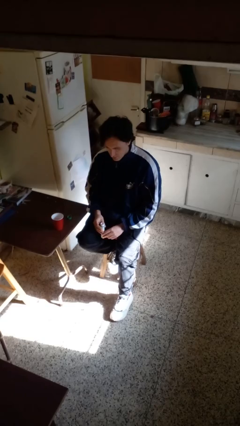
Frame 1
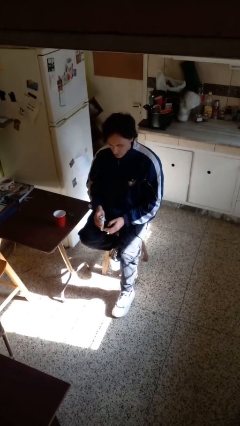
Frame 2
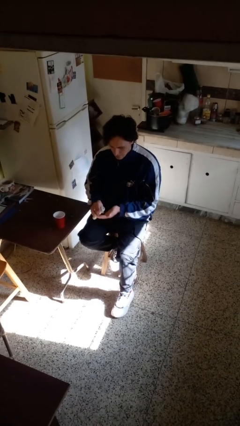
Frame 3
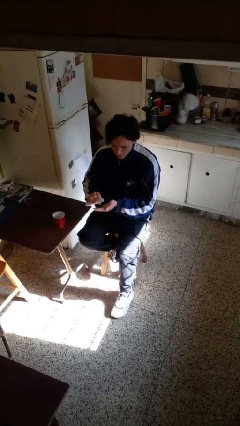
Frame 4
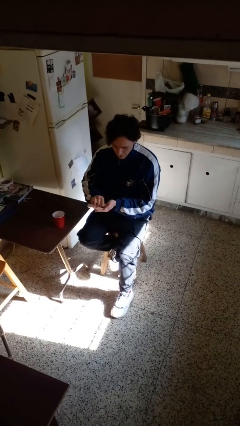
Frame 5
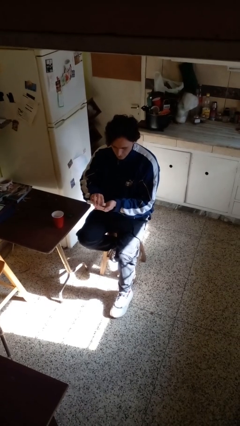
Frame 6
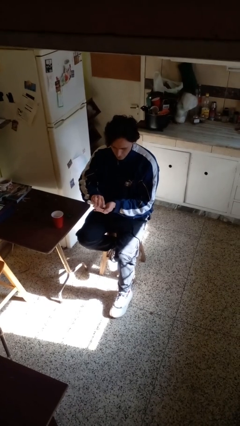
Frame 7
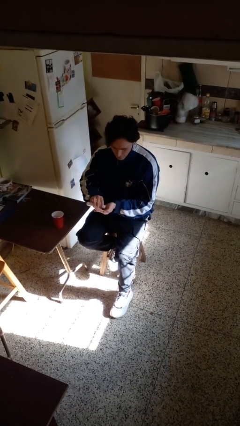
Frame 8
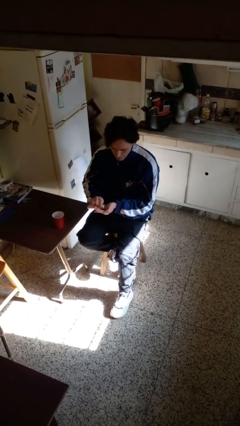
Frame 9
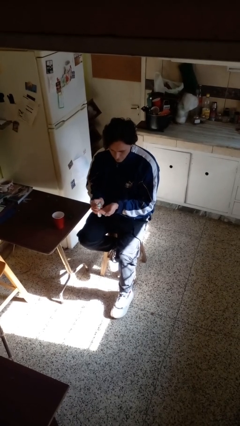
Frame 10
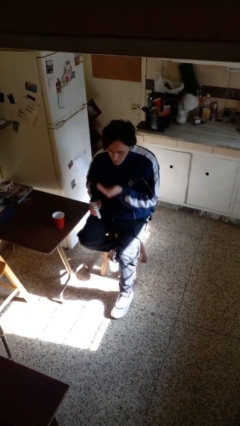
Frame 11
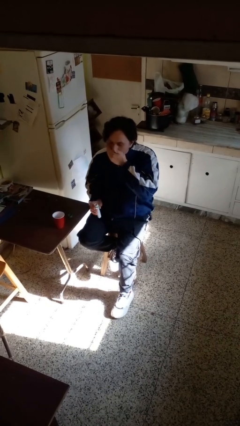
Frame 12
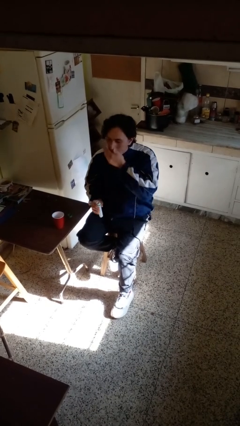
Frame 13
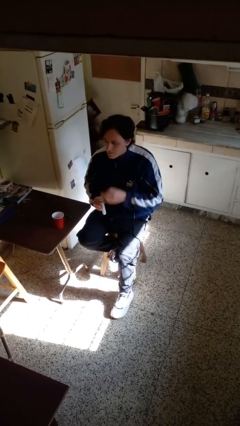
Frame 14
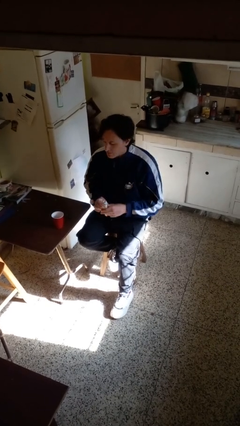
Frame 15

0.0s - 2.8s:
person takes medicine pills

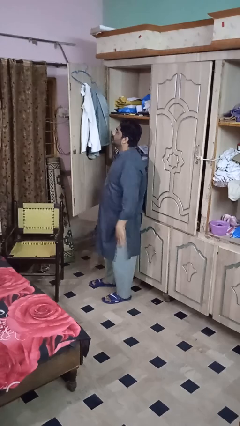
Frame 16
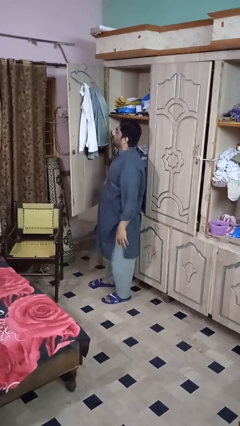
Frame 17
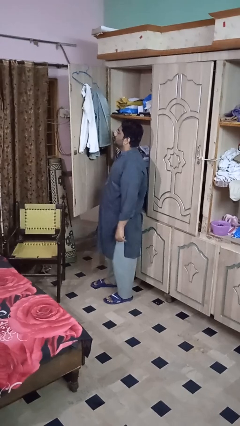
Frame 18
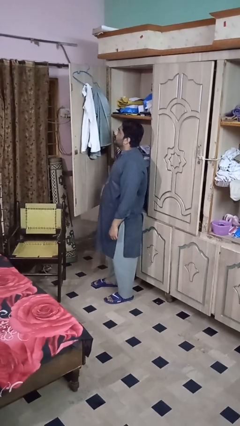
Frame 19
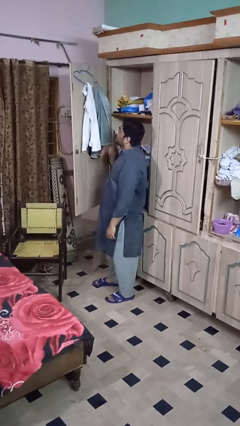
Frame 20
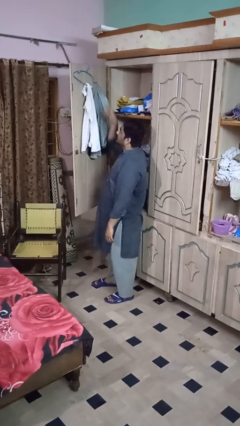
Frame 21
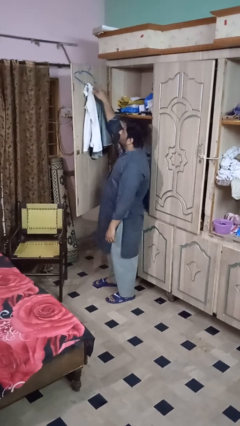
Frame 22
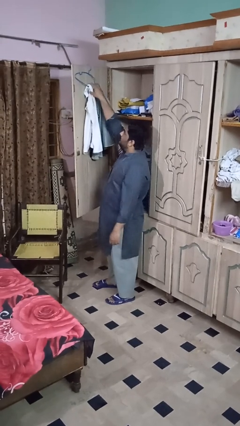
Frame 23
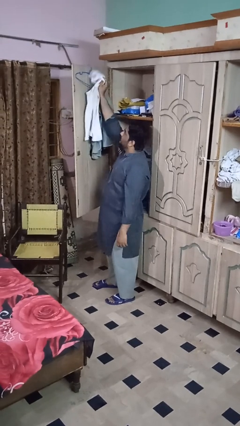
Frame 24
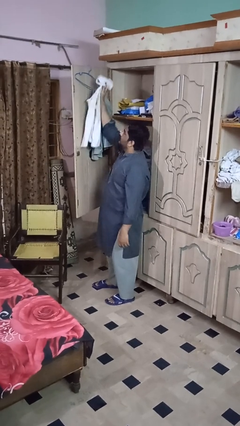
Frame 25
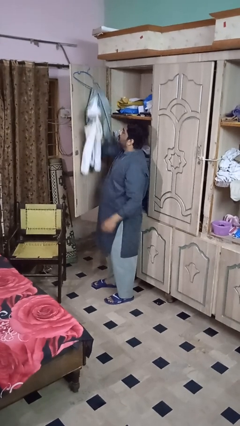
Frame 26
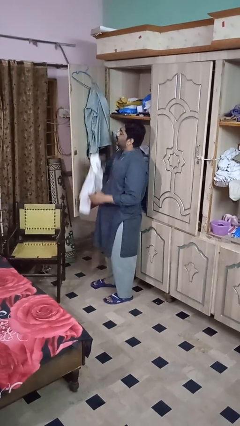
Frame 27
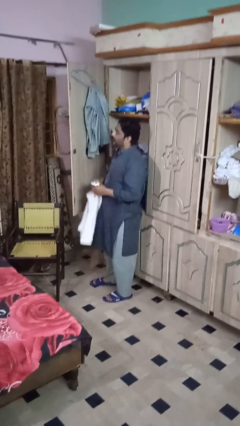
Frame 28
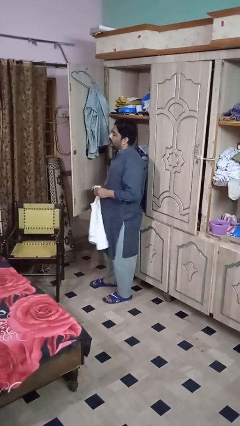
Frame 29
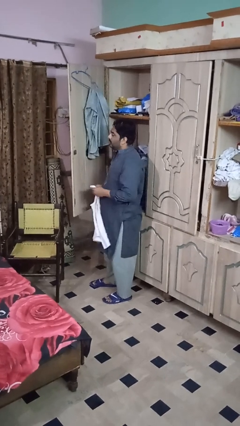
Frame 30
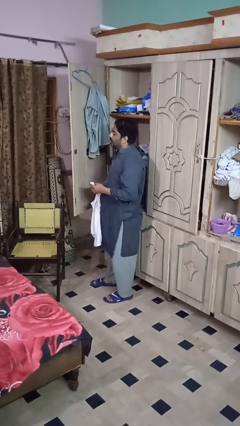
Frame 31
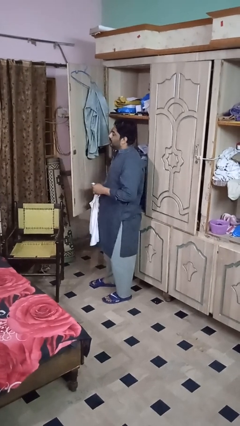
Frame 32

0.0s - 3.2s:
person takes clothes from closet

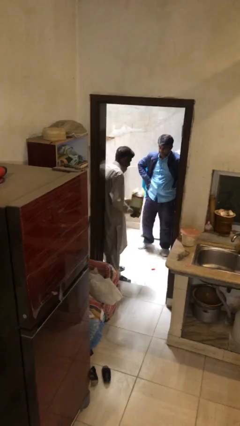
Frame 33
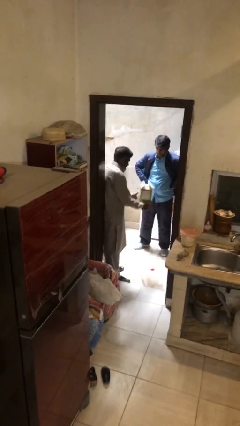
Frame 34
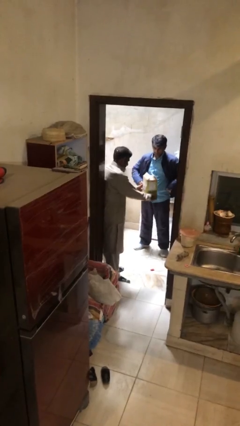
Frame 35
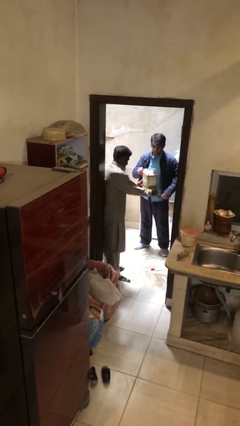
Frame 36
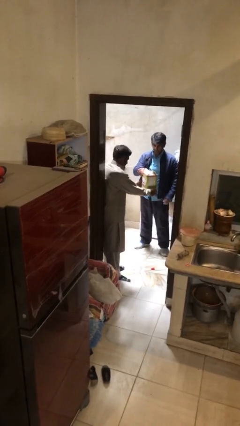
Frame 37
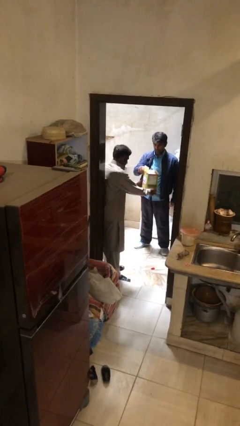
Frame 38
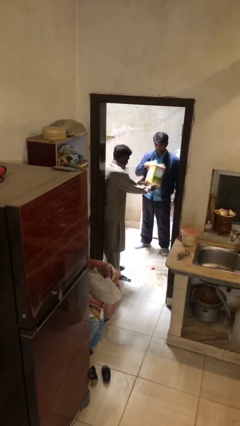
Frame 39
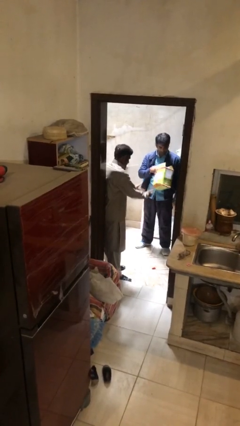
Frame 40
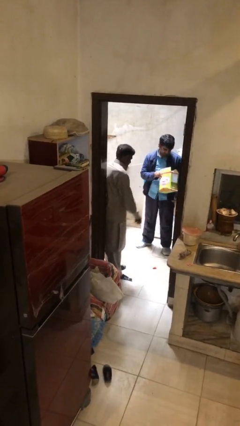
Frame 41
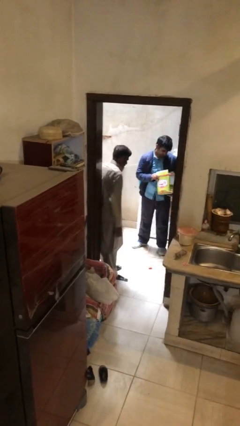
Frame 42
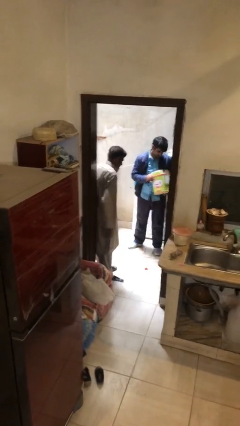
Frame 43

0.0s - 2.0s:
person transfers object to person

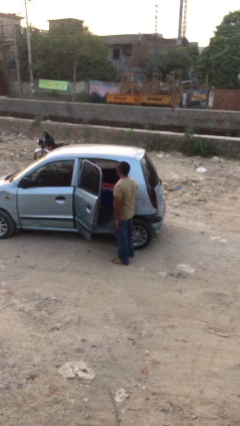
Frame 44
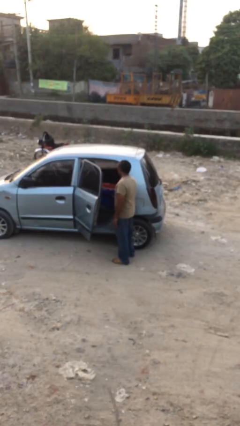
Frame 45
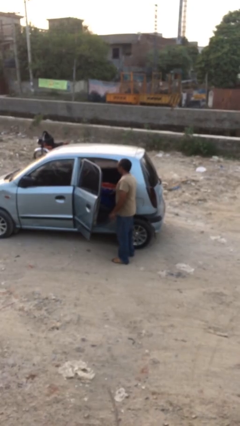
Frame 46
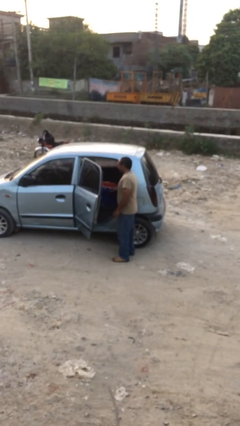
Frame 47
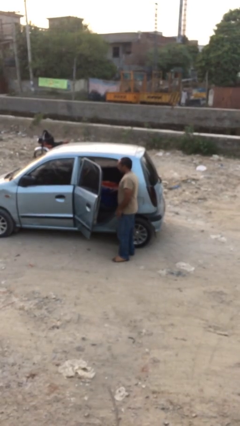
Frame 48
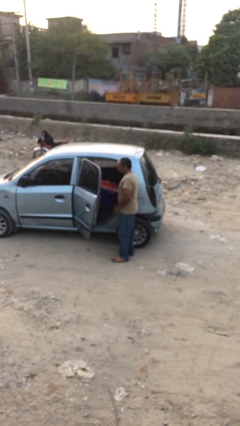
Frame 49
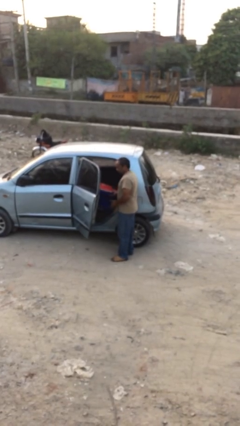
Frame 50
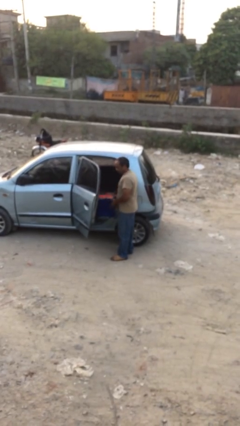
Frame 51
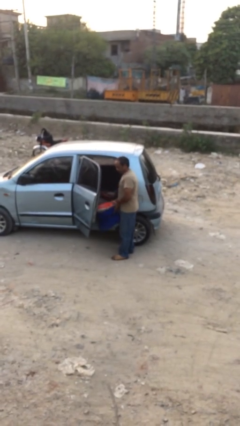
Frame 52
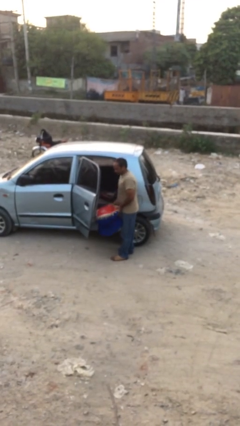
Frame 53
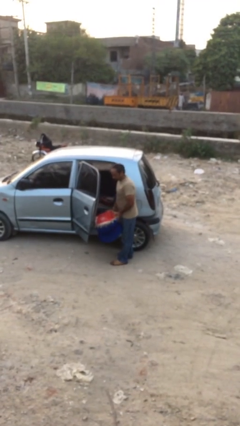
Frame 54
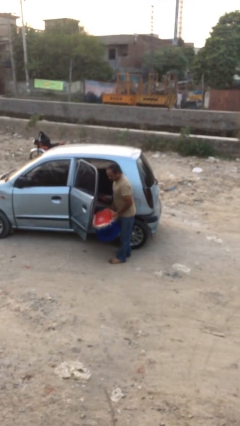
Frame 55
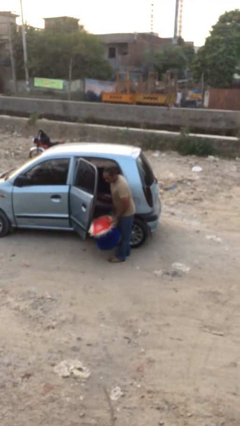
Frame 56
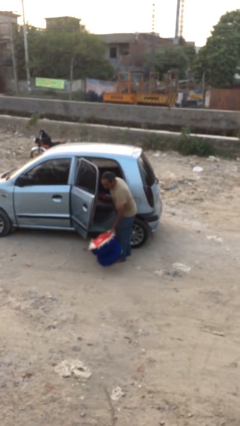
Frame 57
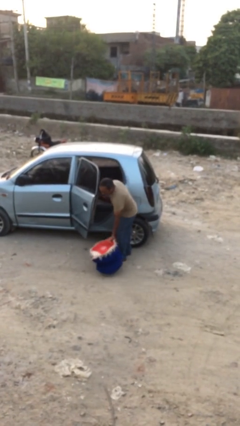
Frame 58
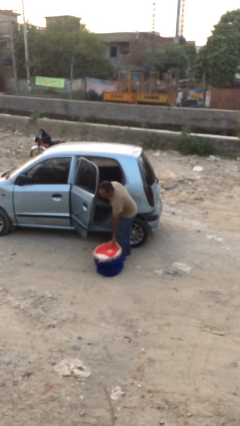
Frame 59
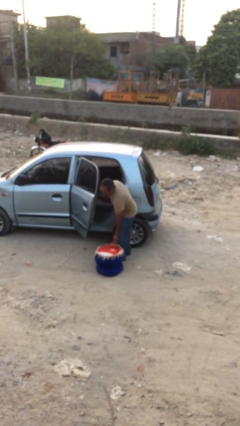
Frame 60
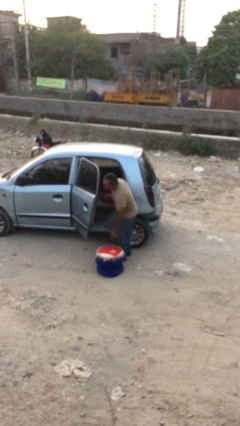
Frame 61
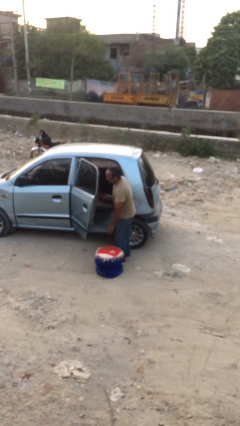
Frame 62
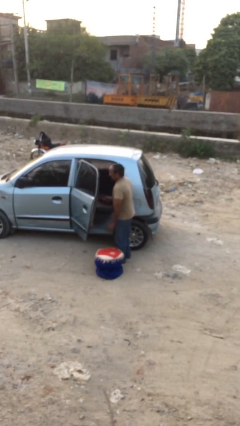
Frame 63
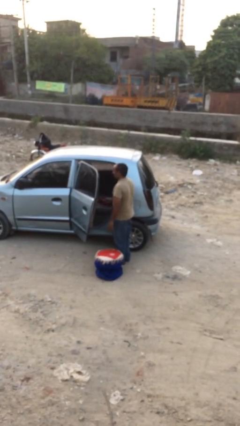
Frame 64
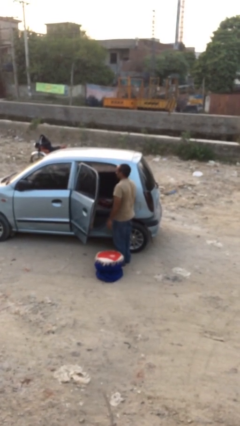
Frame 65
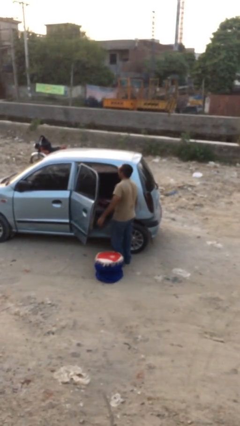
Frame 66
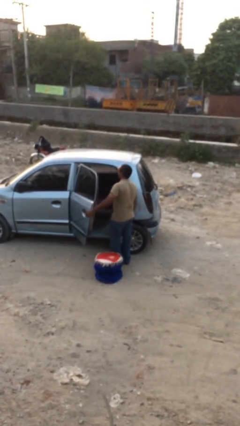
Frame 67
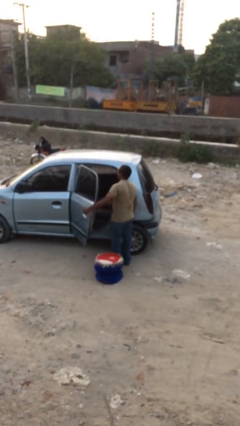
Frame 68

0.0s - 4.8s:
person unloads car

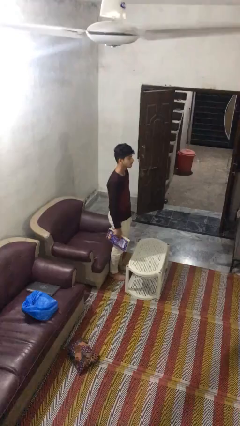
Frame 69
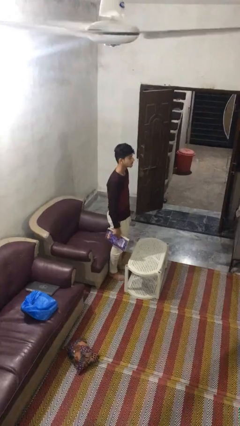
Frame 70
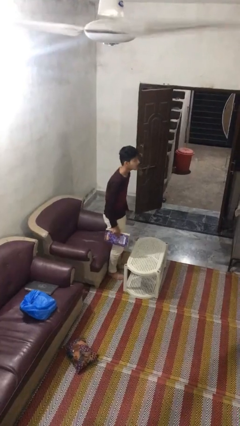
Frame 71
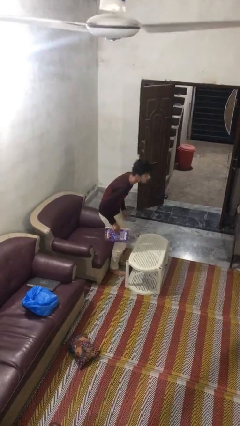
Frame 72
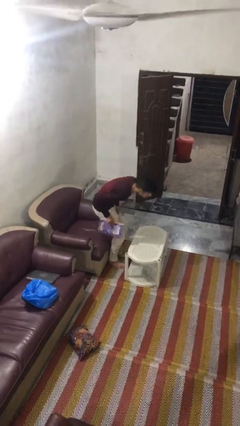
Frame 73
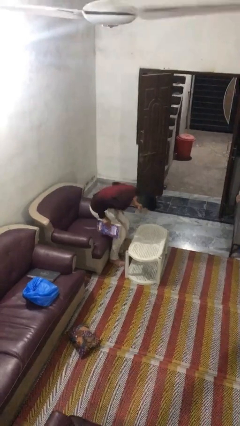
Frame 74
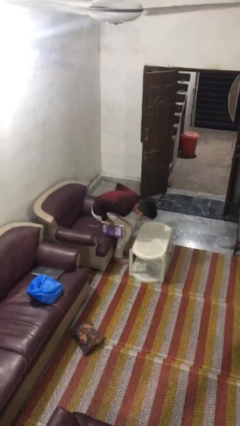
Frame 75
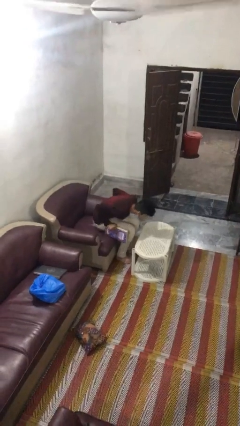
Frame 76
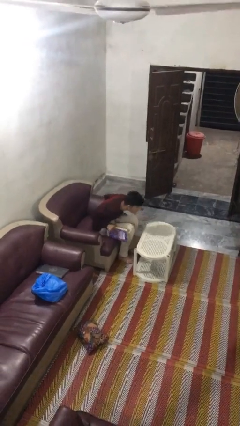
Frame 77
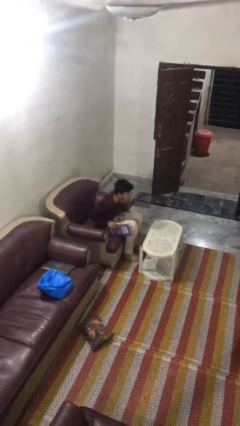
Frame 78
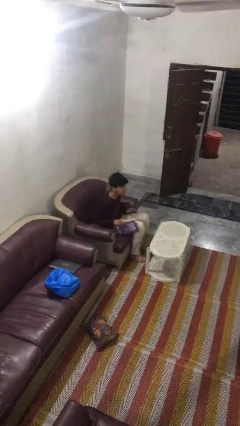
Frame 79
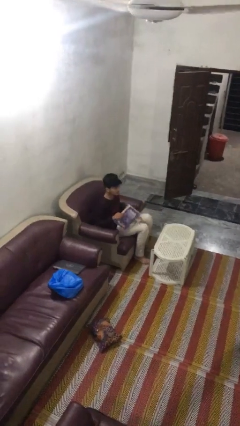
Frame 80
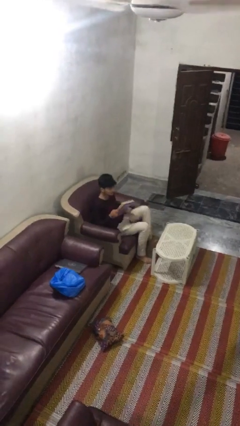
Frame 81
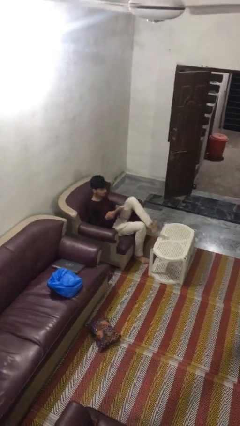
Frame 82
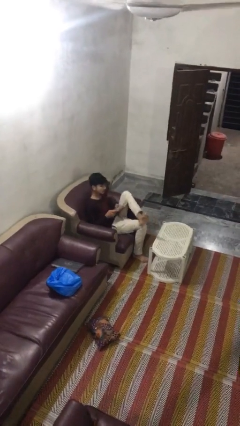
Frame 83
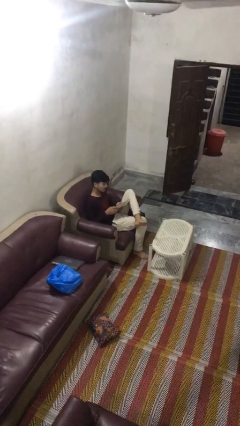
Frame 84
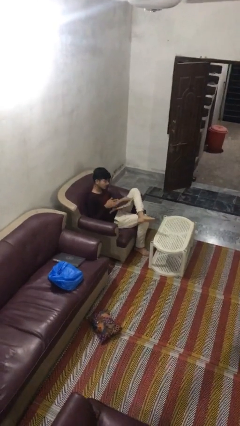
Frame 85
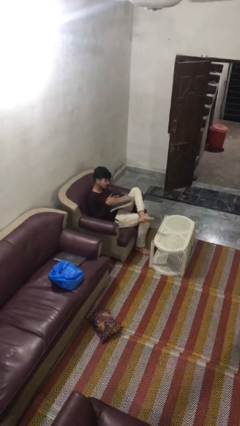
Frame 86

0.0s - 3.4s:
person sits down

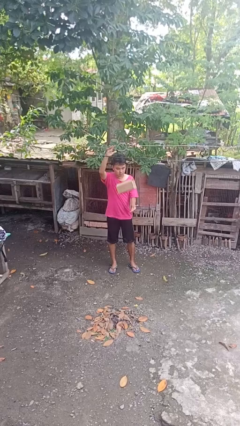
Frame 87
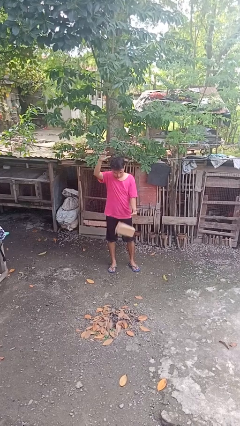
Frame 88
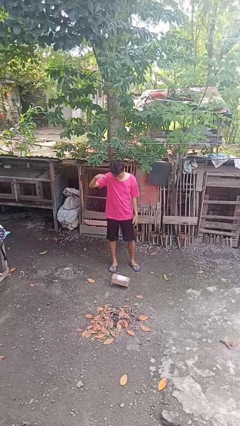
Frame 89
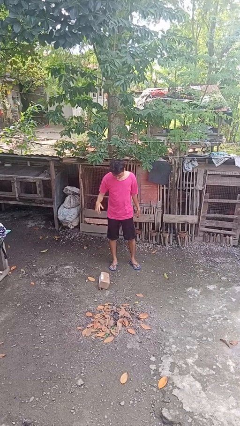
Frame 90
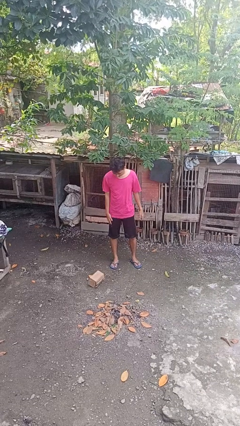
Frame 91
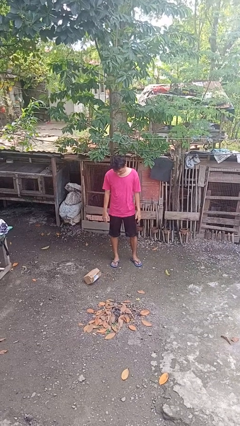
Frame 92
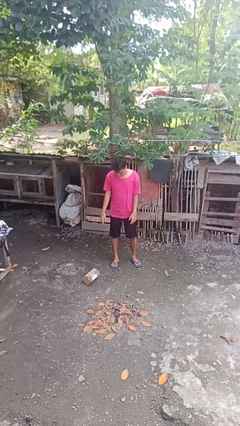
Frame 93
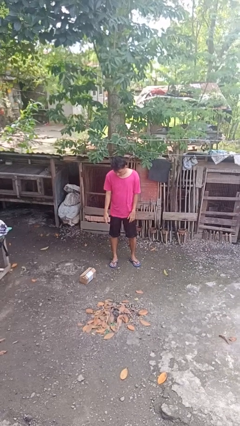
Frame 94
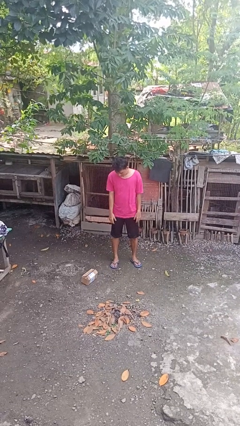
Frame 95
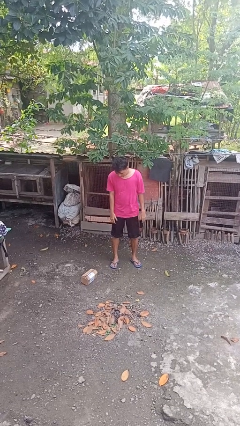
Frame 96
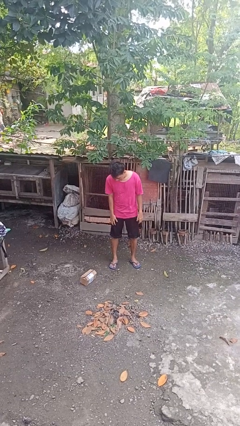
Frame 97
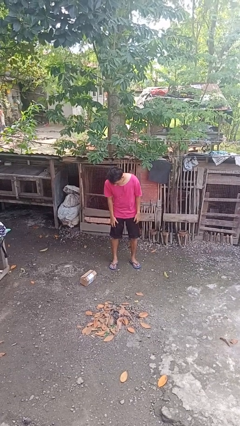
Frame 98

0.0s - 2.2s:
person drops object
